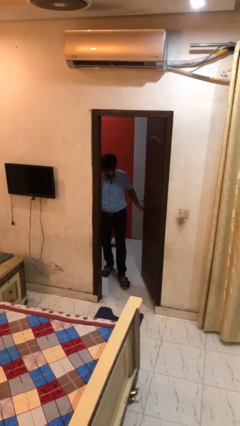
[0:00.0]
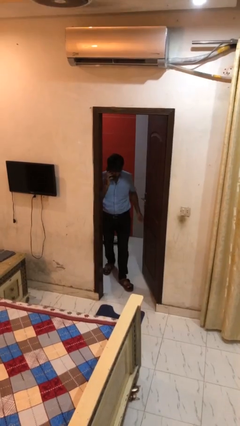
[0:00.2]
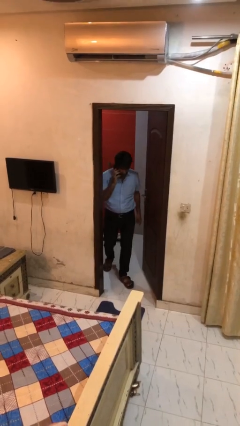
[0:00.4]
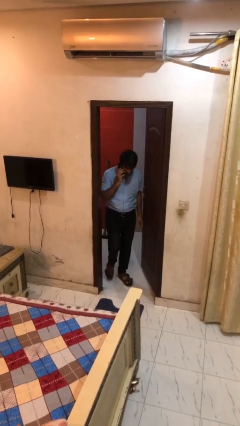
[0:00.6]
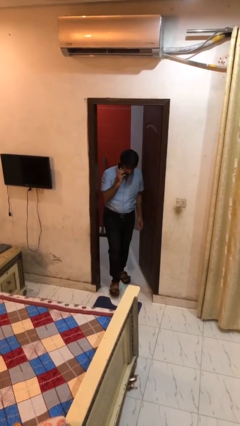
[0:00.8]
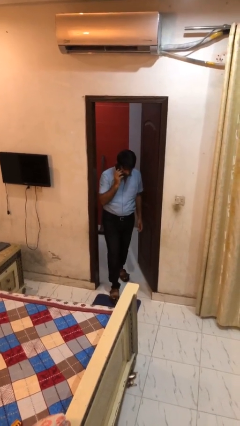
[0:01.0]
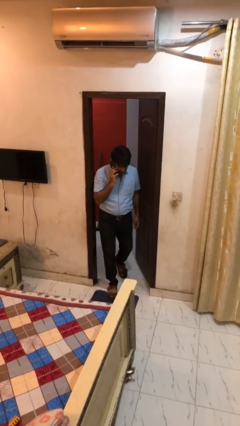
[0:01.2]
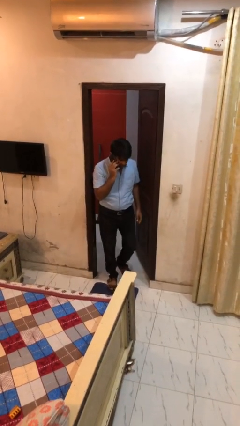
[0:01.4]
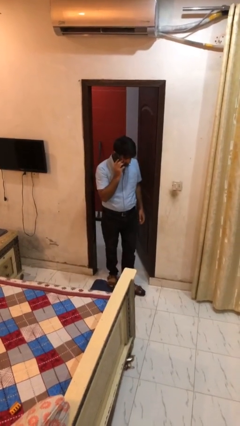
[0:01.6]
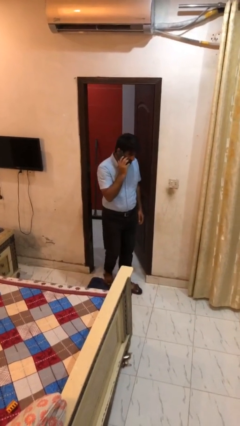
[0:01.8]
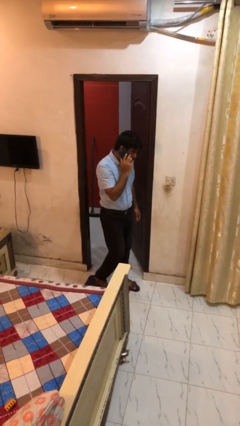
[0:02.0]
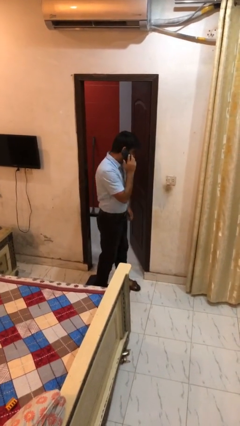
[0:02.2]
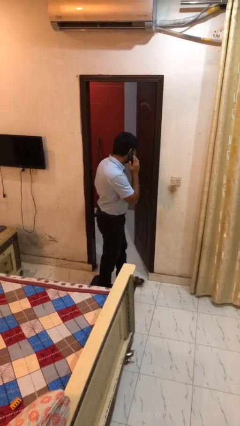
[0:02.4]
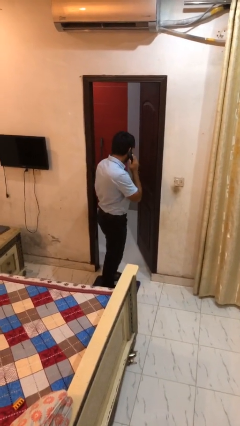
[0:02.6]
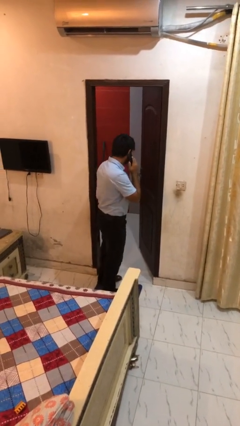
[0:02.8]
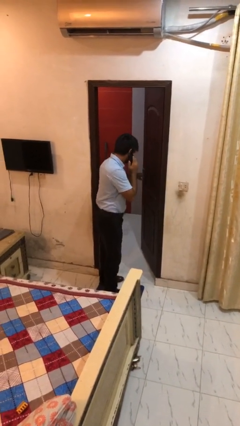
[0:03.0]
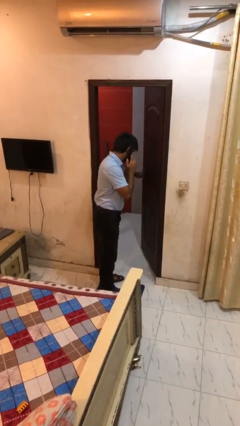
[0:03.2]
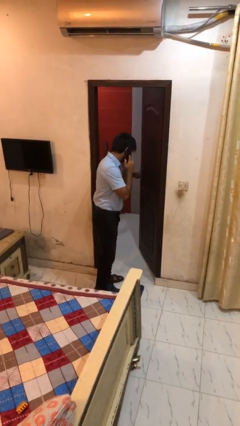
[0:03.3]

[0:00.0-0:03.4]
person enters scene through structure

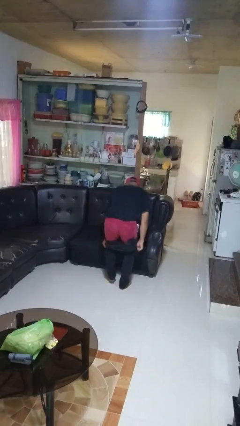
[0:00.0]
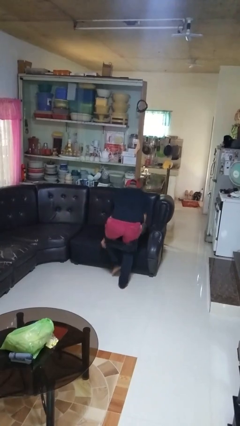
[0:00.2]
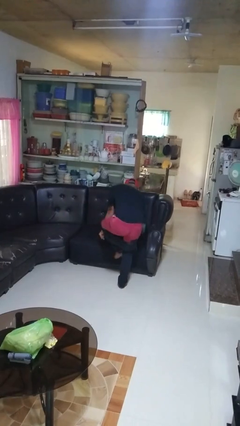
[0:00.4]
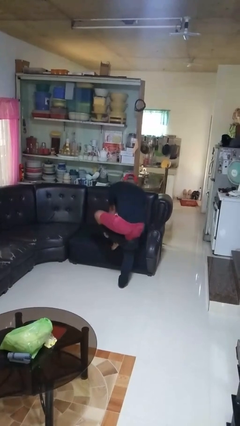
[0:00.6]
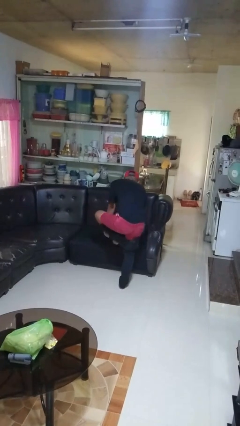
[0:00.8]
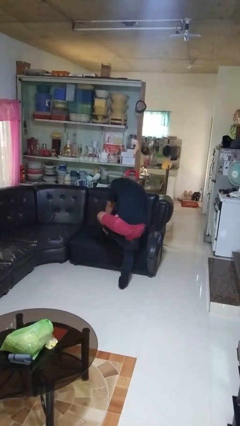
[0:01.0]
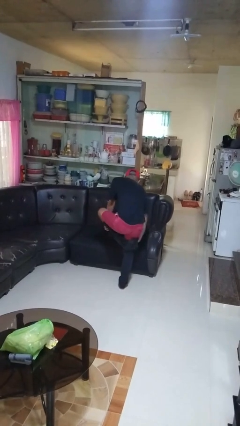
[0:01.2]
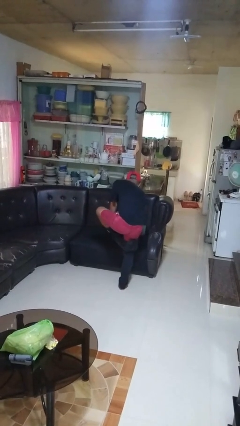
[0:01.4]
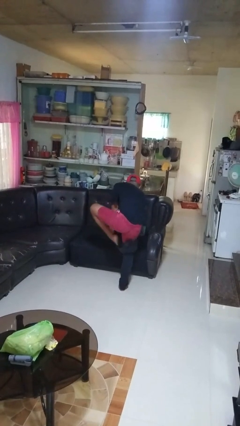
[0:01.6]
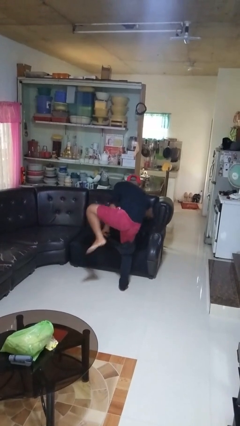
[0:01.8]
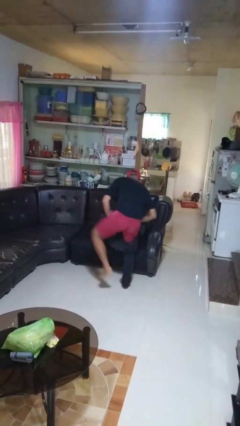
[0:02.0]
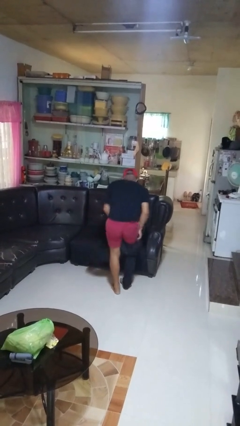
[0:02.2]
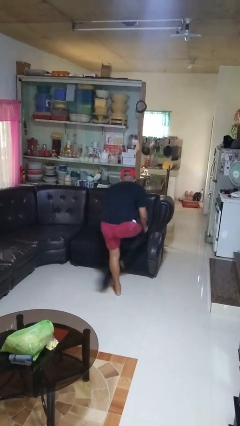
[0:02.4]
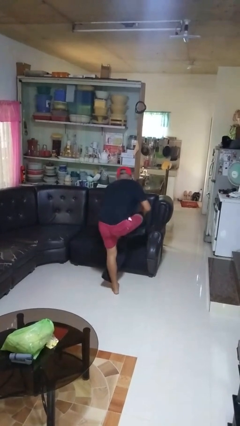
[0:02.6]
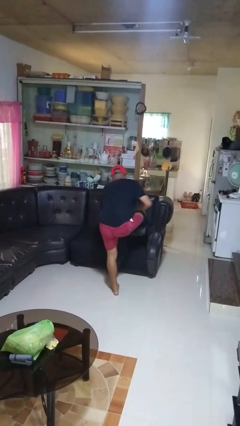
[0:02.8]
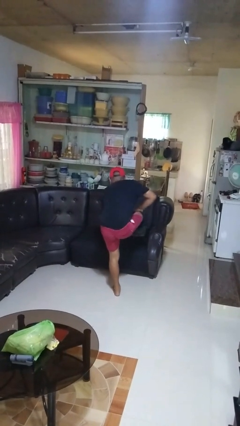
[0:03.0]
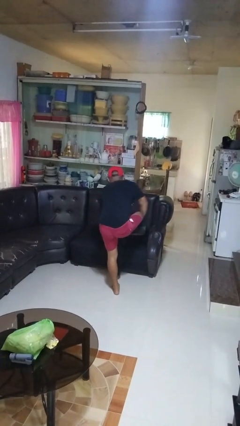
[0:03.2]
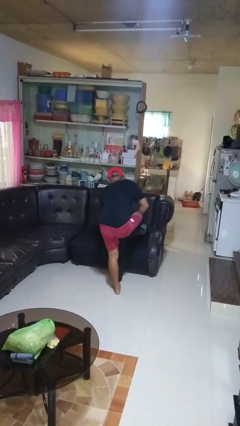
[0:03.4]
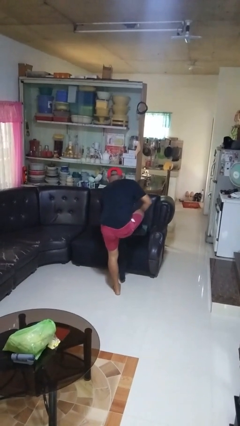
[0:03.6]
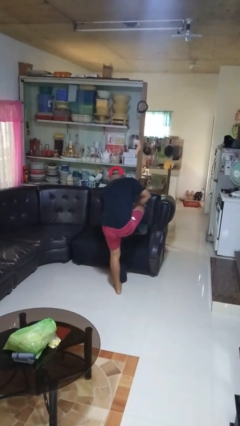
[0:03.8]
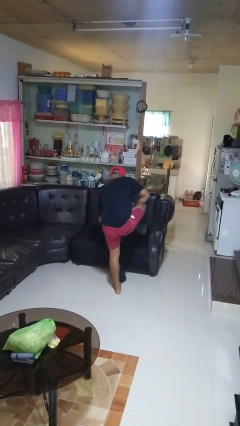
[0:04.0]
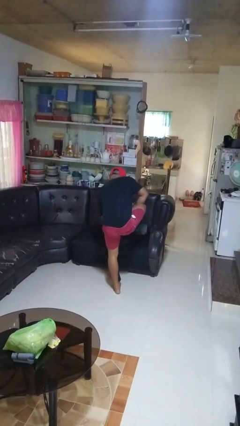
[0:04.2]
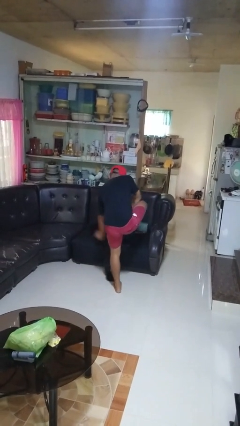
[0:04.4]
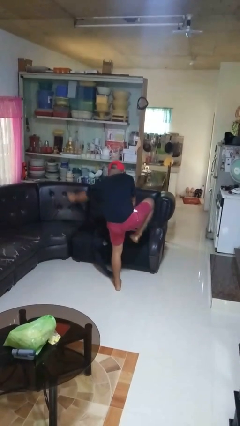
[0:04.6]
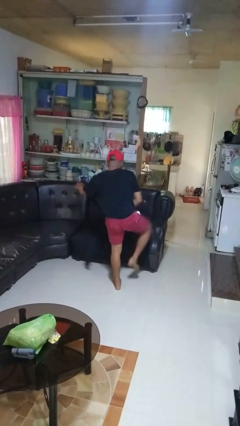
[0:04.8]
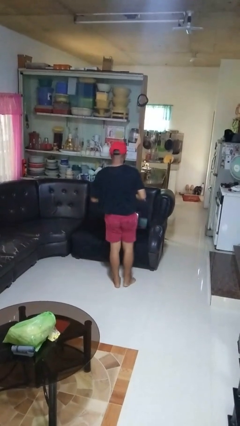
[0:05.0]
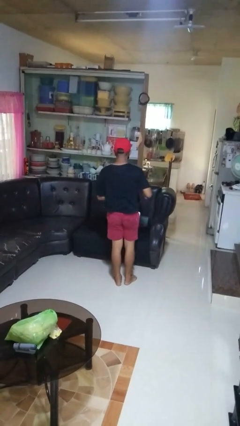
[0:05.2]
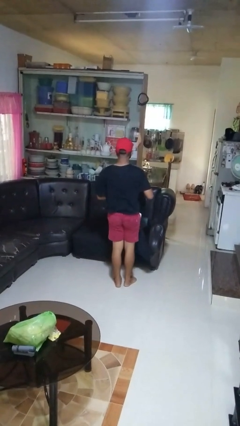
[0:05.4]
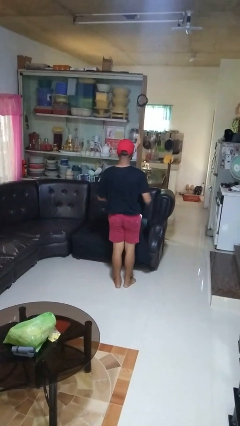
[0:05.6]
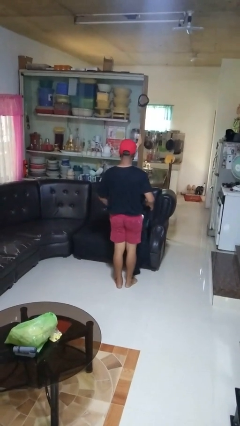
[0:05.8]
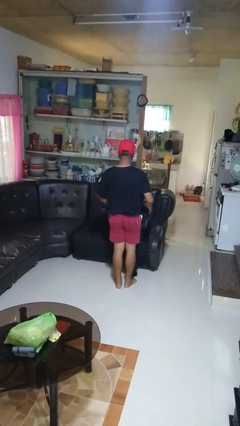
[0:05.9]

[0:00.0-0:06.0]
person takes off pants

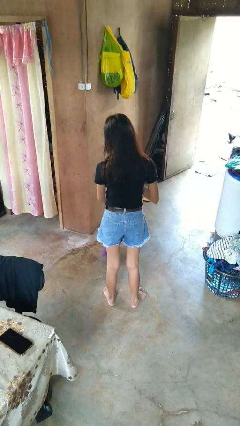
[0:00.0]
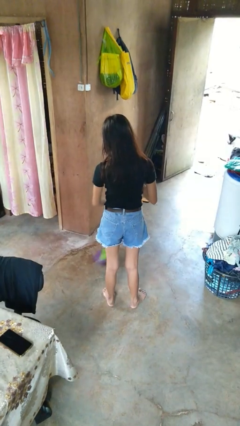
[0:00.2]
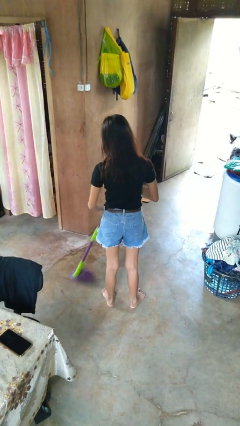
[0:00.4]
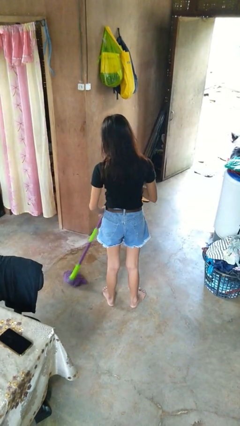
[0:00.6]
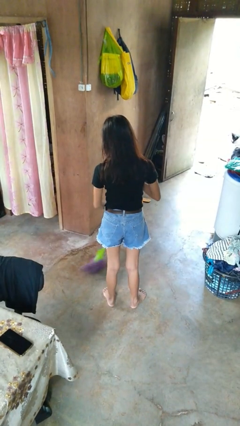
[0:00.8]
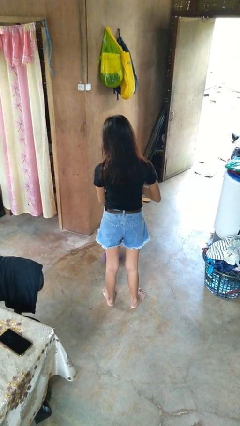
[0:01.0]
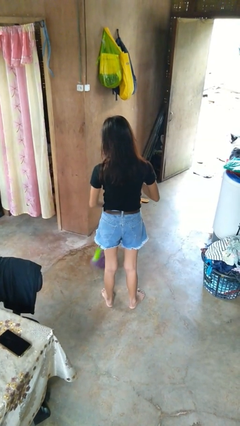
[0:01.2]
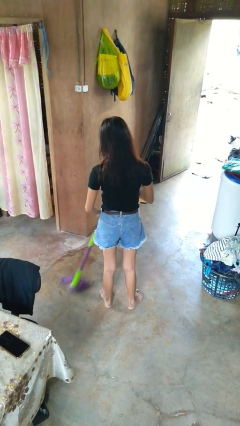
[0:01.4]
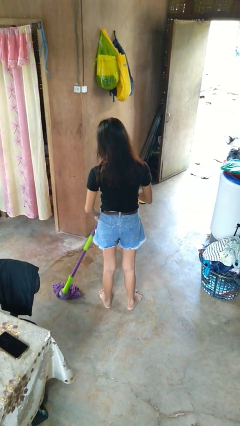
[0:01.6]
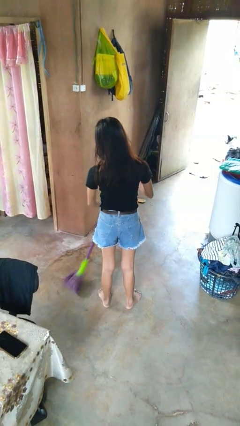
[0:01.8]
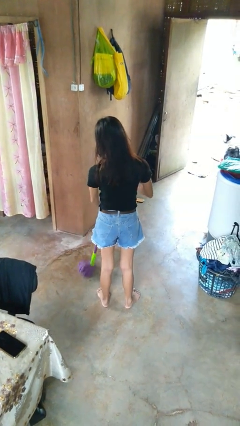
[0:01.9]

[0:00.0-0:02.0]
person mops

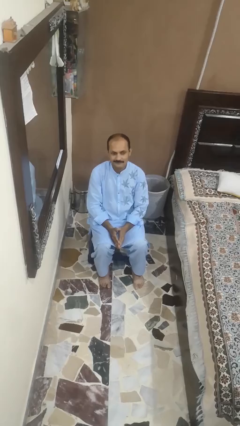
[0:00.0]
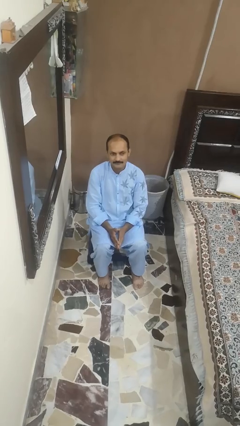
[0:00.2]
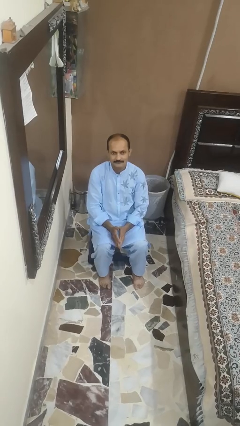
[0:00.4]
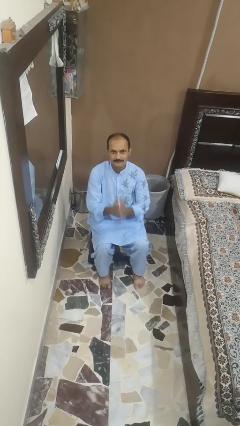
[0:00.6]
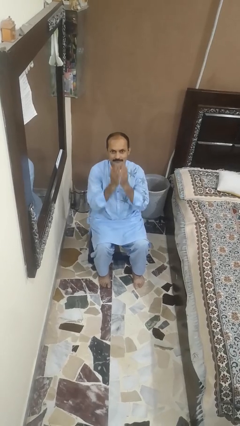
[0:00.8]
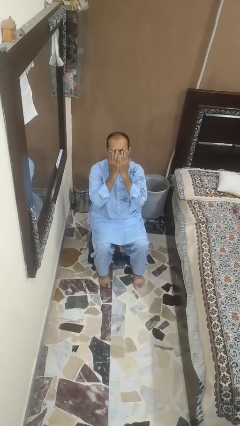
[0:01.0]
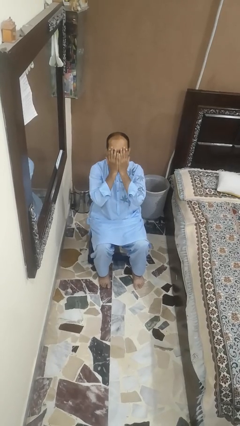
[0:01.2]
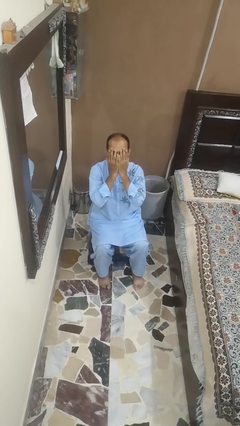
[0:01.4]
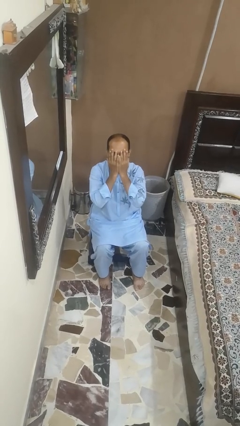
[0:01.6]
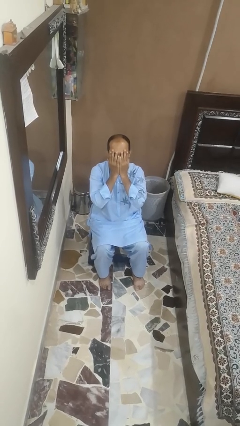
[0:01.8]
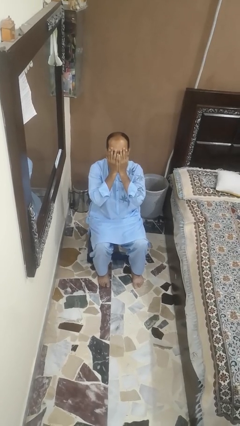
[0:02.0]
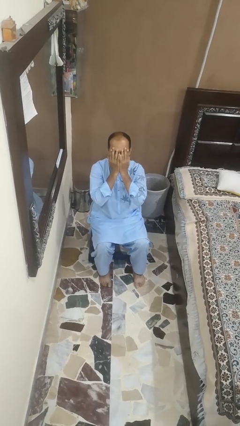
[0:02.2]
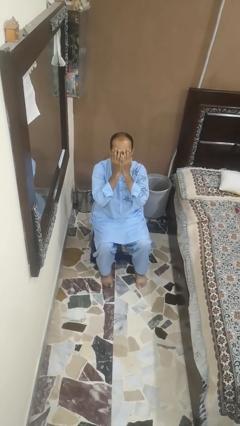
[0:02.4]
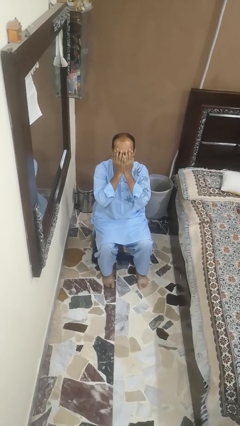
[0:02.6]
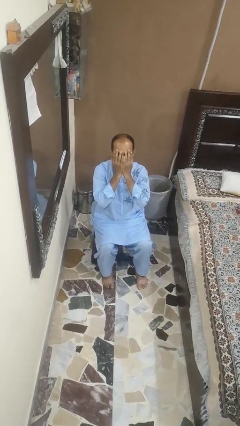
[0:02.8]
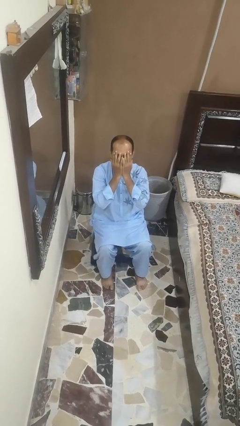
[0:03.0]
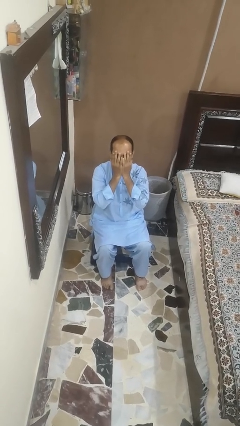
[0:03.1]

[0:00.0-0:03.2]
person covers face with hands

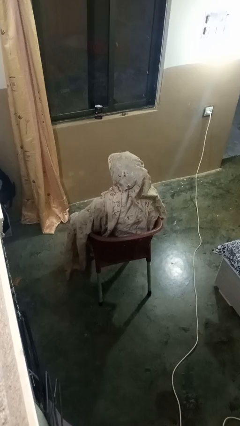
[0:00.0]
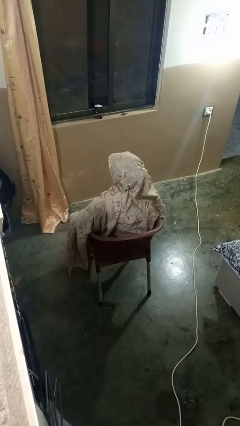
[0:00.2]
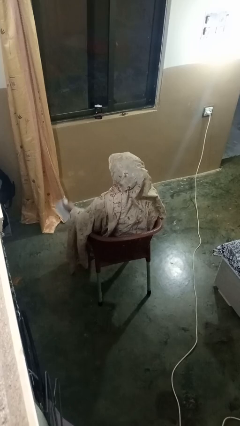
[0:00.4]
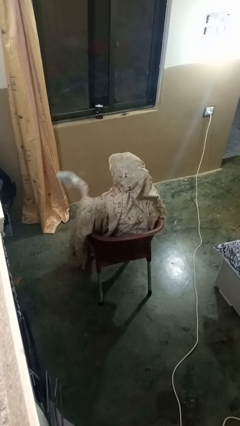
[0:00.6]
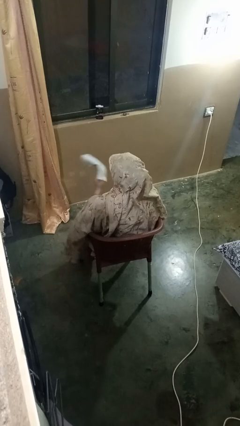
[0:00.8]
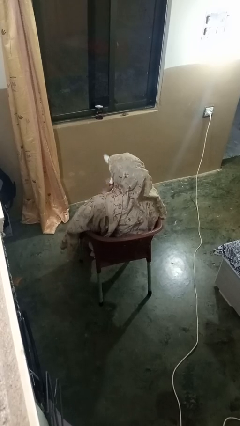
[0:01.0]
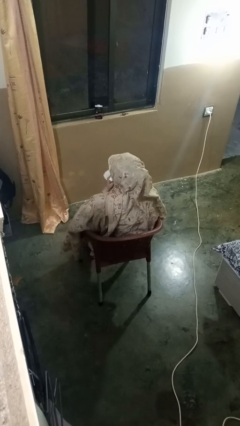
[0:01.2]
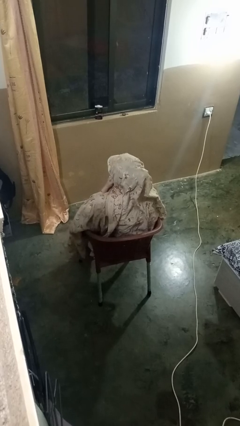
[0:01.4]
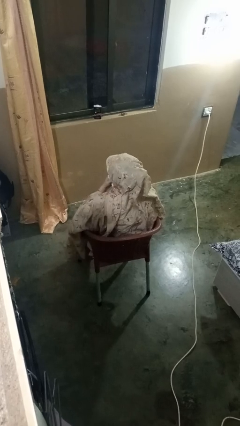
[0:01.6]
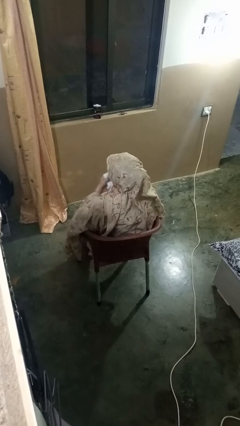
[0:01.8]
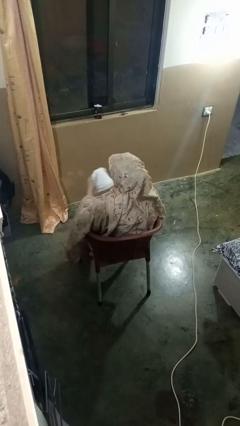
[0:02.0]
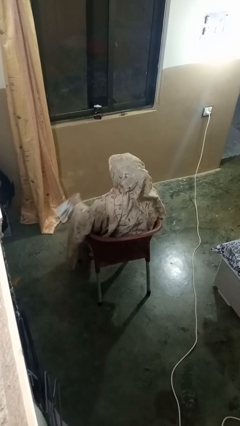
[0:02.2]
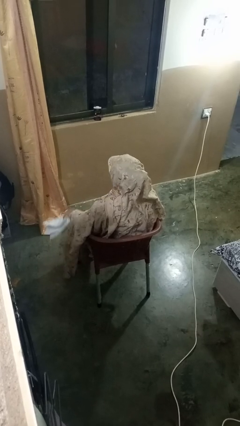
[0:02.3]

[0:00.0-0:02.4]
person wipes mouth with napkin

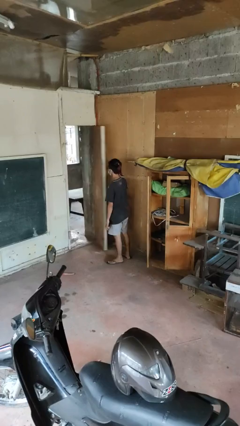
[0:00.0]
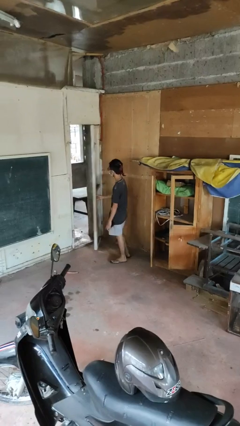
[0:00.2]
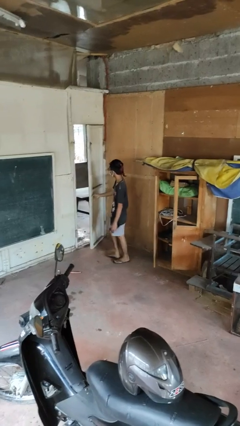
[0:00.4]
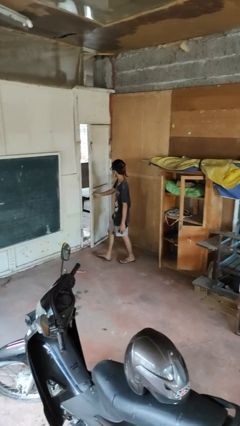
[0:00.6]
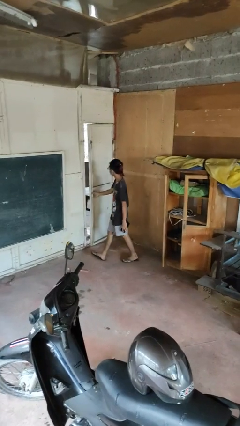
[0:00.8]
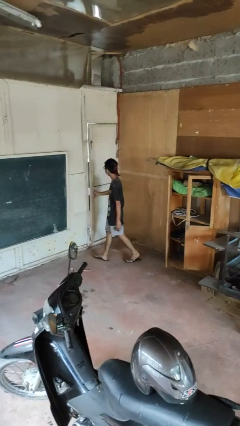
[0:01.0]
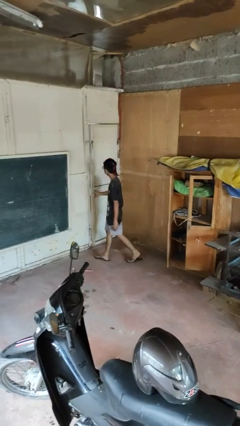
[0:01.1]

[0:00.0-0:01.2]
person closes facility door
